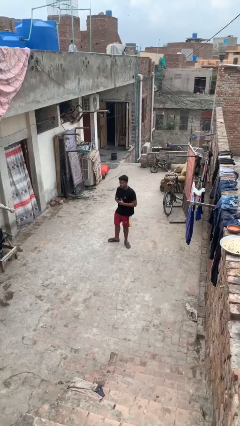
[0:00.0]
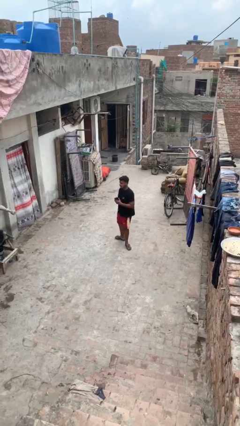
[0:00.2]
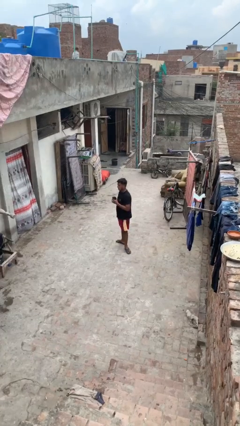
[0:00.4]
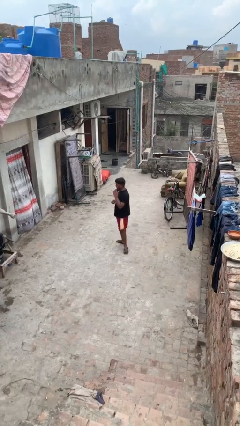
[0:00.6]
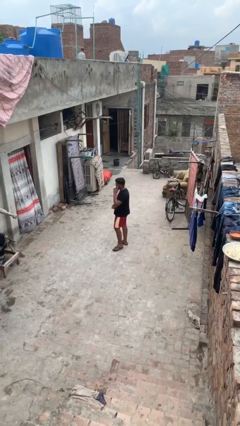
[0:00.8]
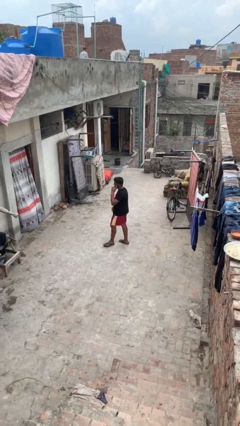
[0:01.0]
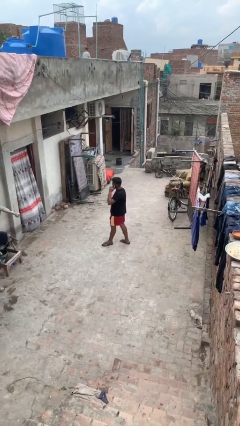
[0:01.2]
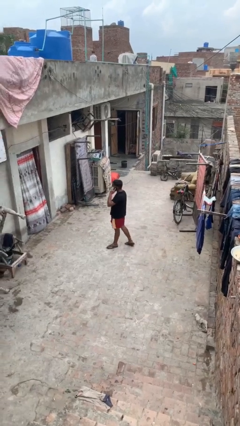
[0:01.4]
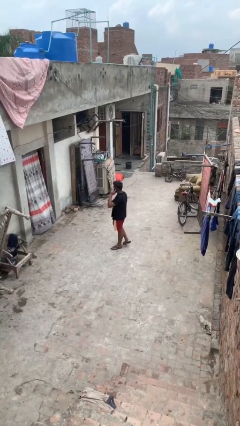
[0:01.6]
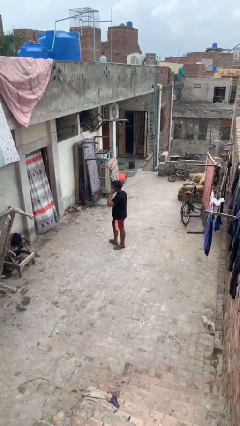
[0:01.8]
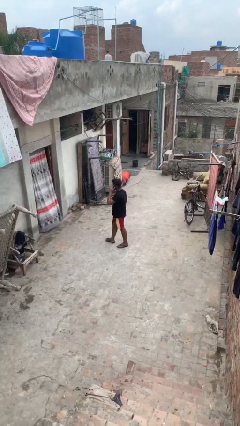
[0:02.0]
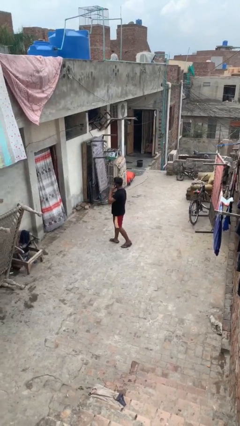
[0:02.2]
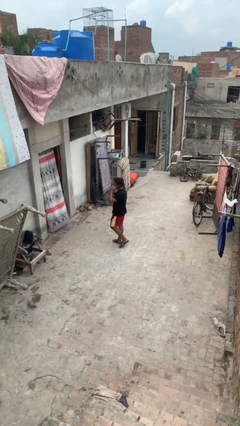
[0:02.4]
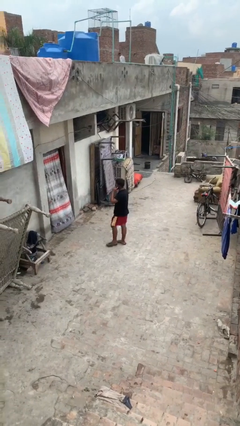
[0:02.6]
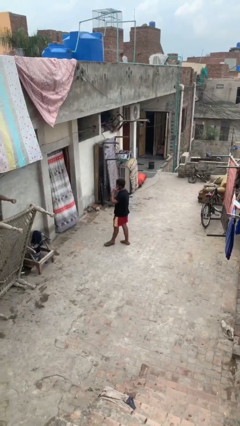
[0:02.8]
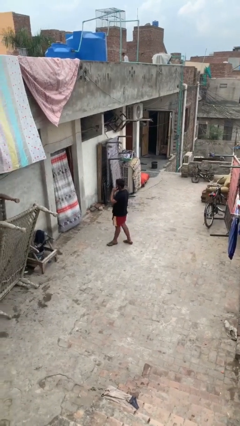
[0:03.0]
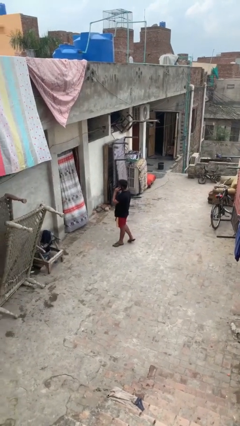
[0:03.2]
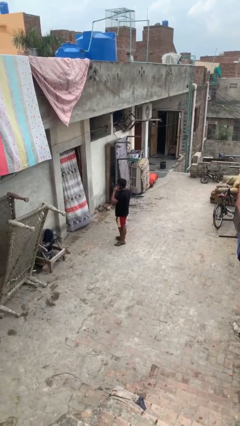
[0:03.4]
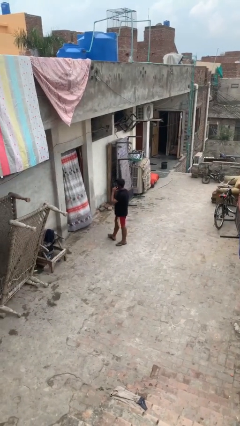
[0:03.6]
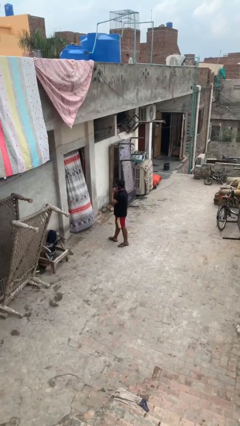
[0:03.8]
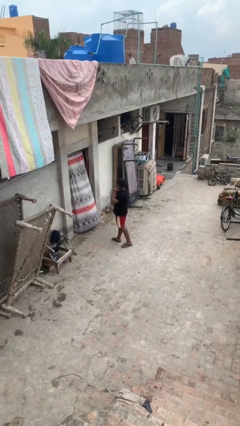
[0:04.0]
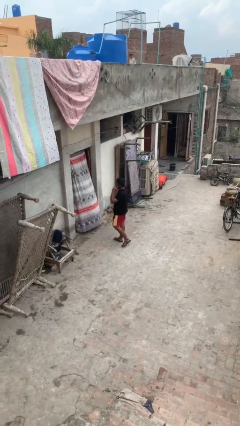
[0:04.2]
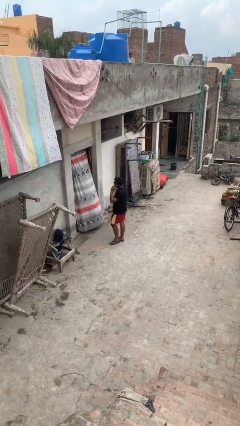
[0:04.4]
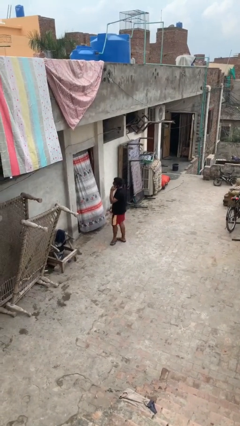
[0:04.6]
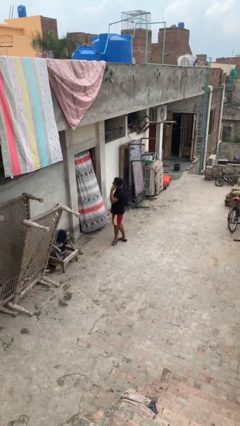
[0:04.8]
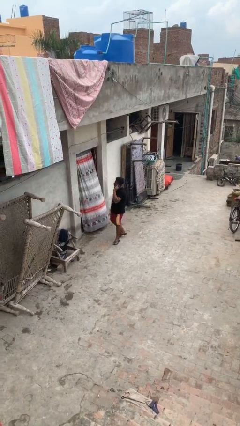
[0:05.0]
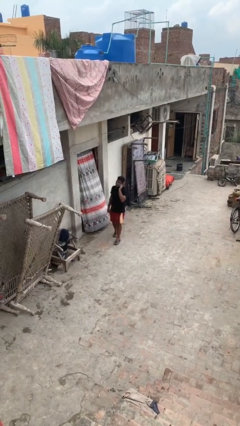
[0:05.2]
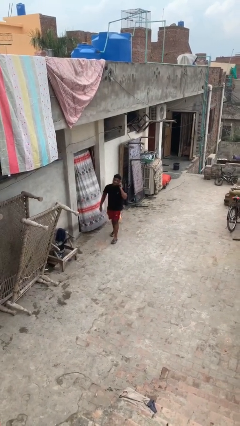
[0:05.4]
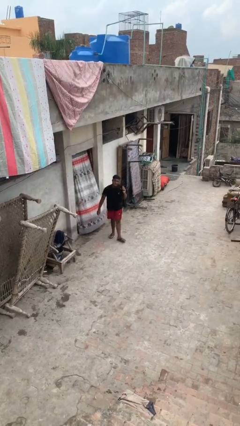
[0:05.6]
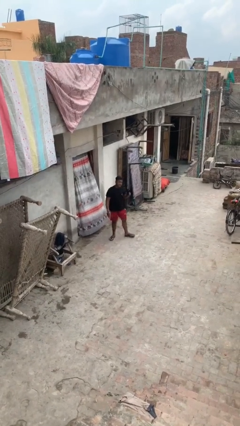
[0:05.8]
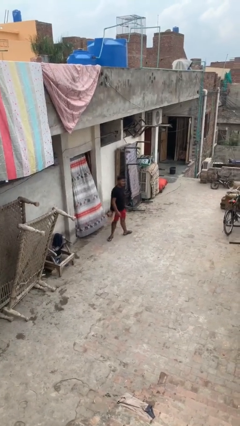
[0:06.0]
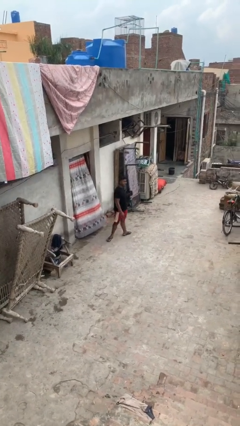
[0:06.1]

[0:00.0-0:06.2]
person talks on phone

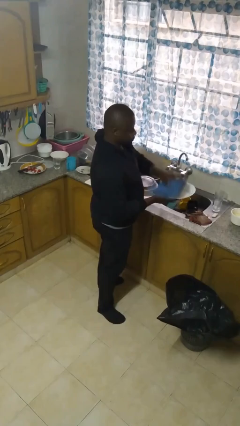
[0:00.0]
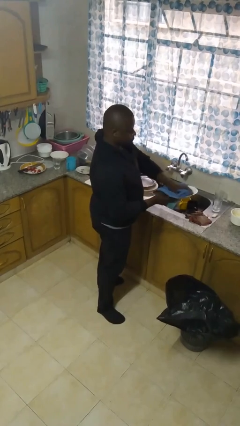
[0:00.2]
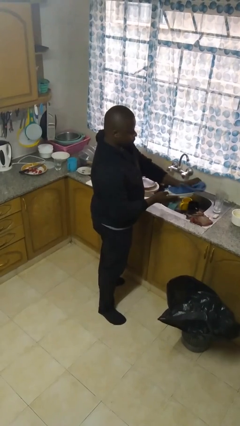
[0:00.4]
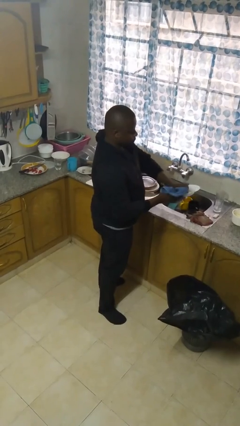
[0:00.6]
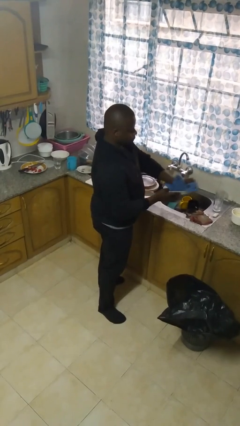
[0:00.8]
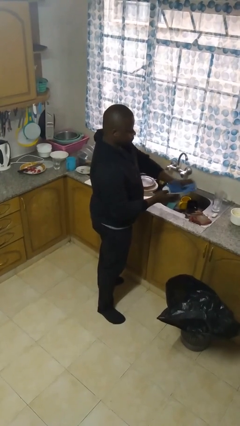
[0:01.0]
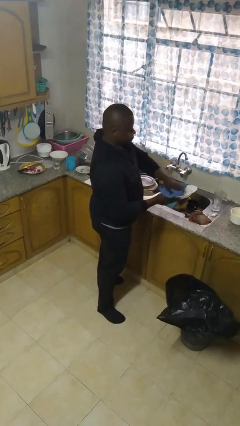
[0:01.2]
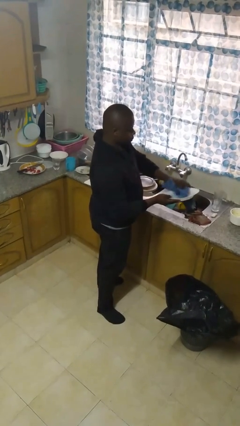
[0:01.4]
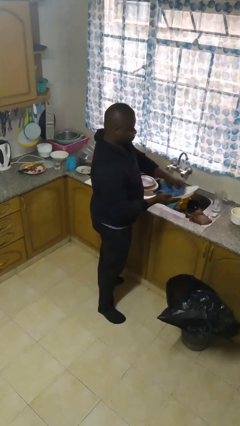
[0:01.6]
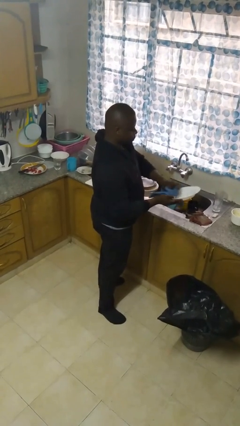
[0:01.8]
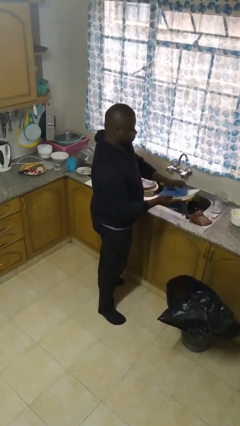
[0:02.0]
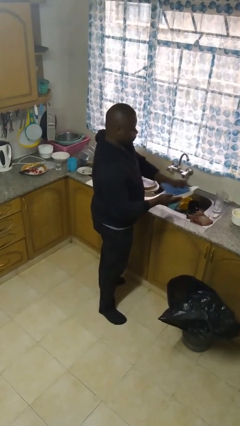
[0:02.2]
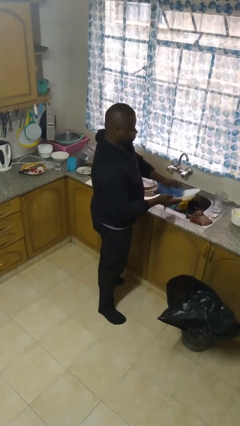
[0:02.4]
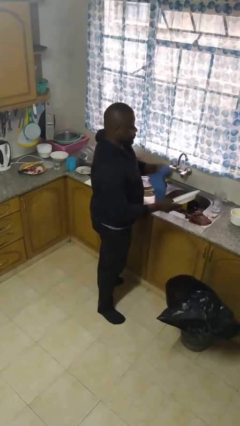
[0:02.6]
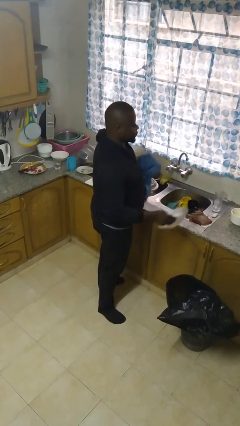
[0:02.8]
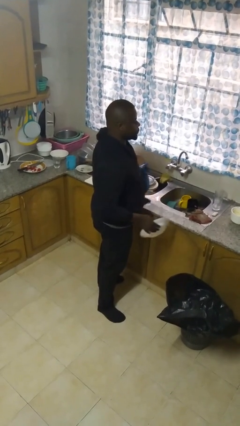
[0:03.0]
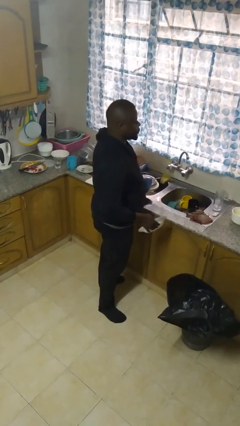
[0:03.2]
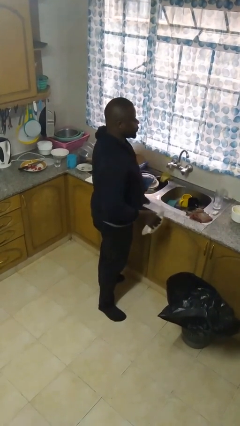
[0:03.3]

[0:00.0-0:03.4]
person dries dish

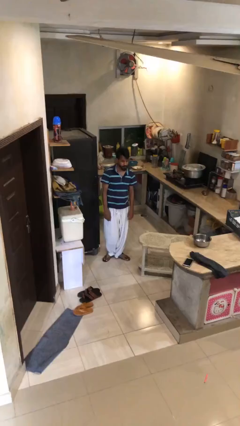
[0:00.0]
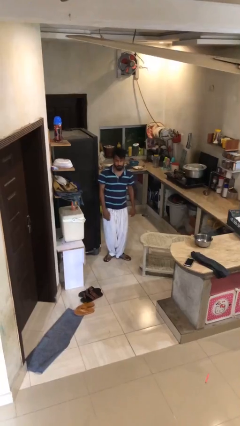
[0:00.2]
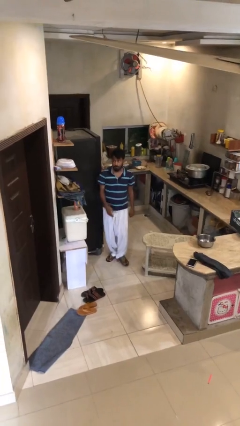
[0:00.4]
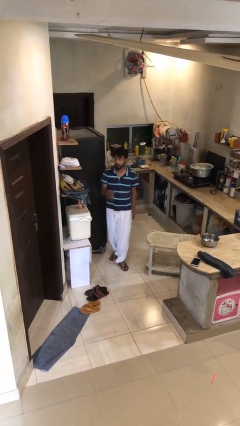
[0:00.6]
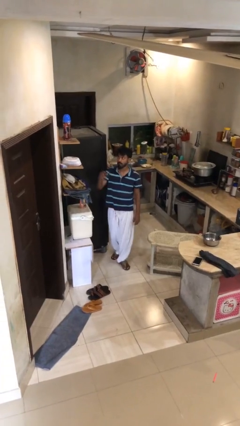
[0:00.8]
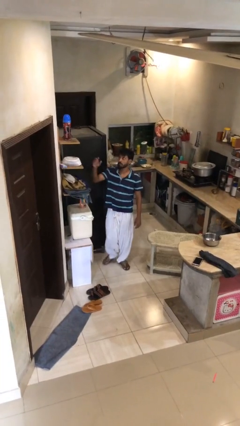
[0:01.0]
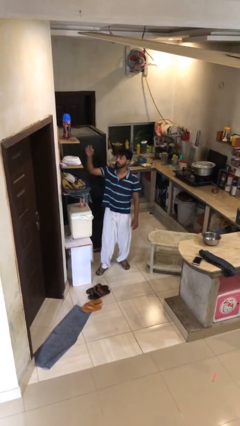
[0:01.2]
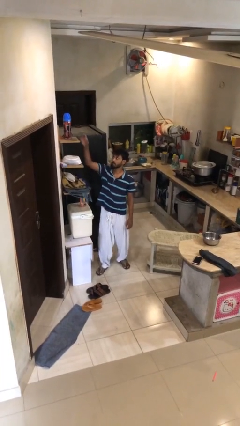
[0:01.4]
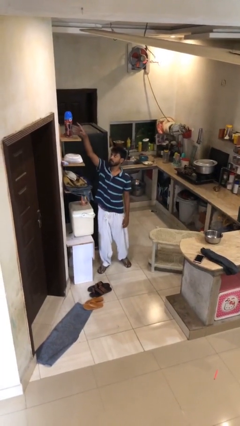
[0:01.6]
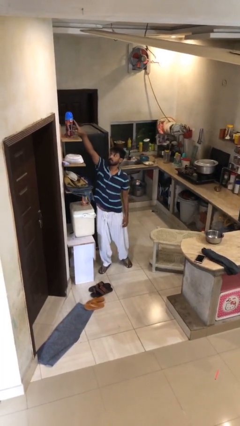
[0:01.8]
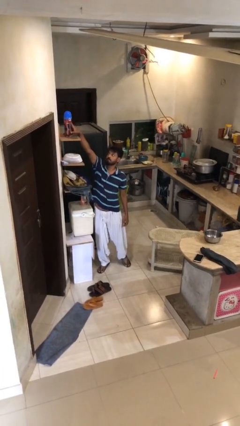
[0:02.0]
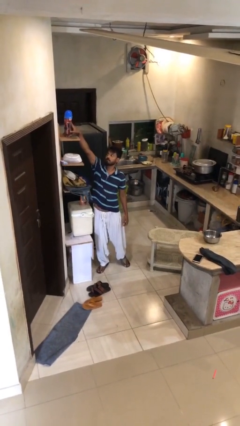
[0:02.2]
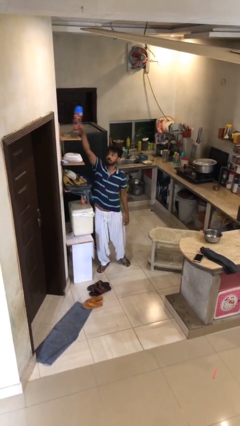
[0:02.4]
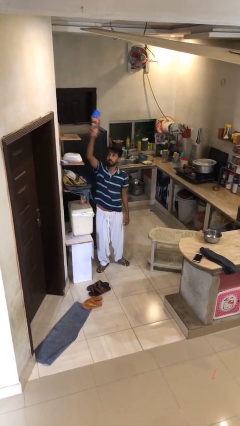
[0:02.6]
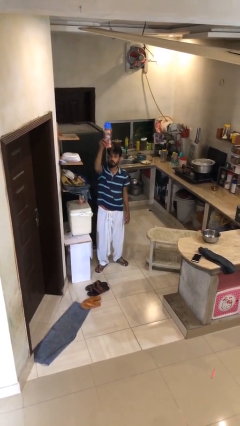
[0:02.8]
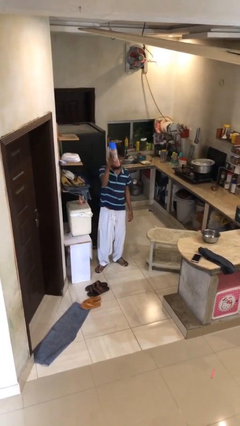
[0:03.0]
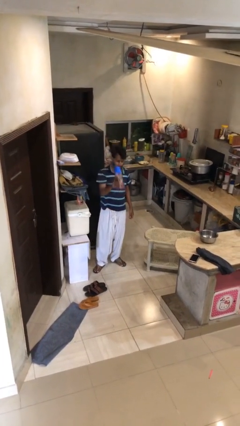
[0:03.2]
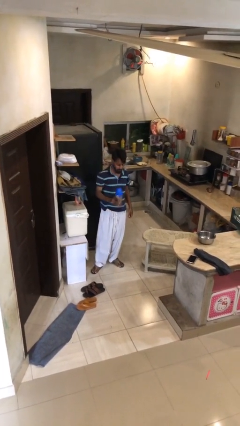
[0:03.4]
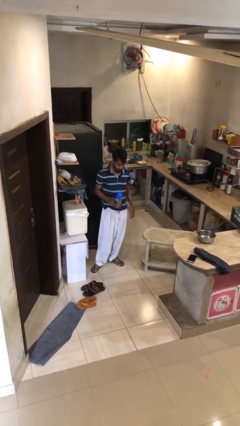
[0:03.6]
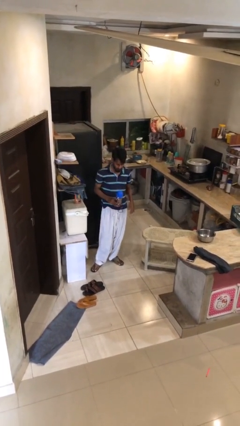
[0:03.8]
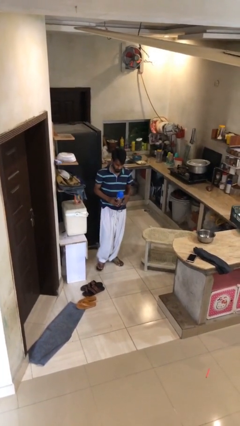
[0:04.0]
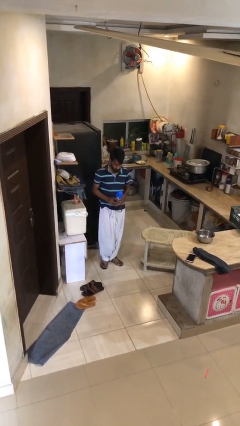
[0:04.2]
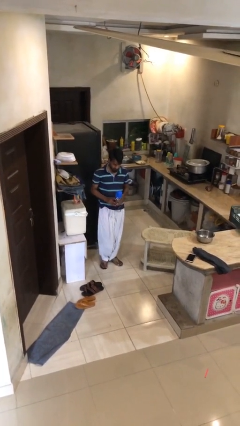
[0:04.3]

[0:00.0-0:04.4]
person picks up object from shelf

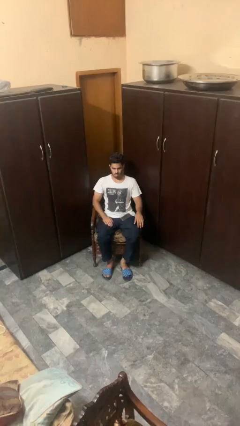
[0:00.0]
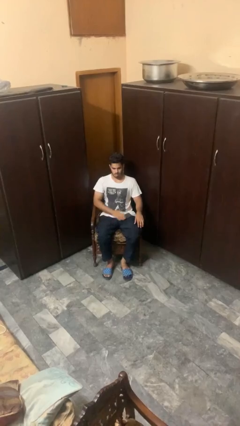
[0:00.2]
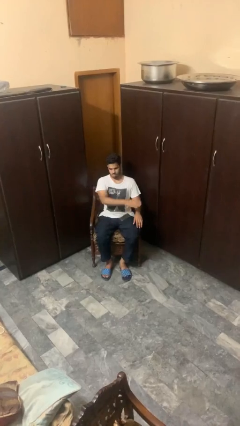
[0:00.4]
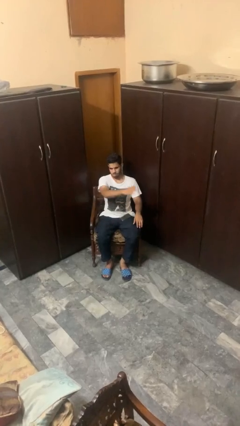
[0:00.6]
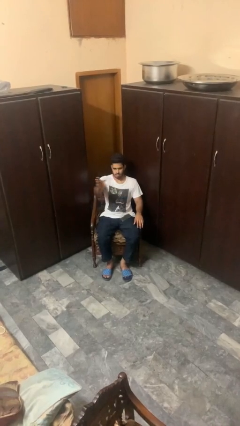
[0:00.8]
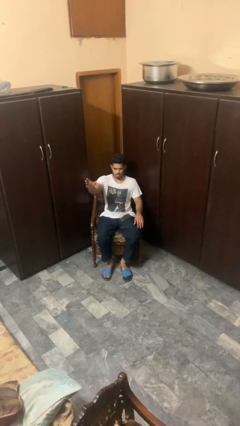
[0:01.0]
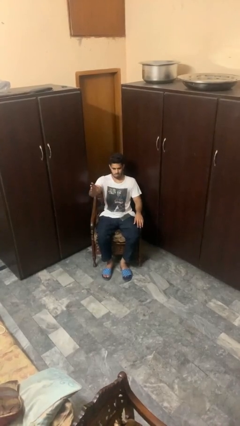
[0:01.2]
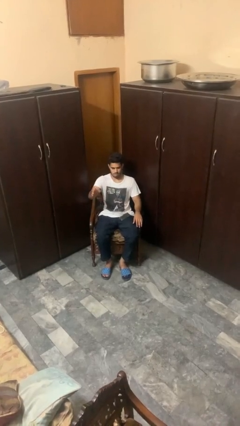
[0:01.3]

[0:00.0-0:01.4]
person gestures swipe right

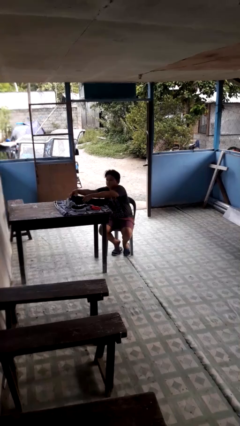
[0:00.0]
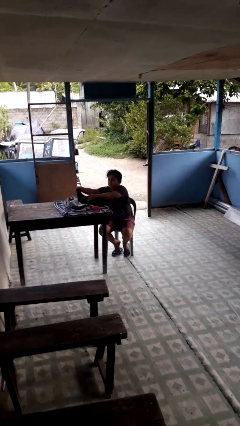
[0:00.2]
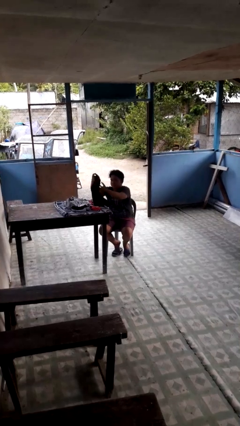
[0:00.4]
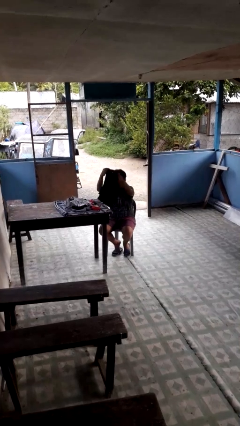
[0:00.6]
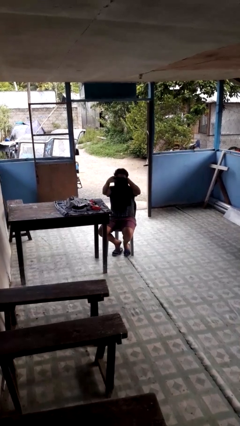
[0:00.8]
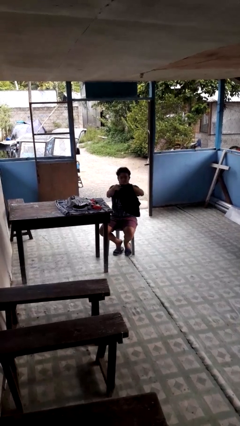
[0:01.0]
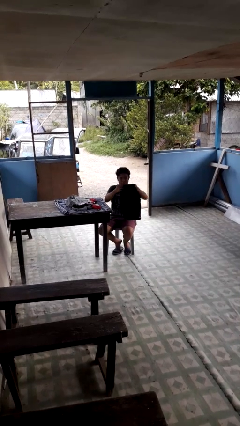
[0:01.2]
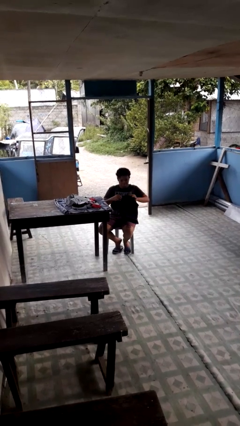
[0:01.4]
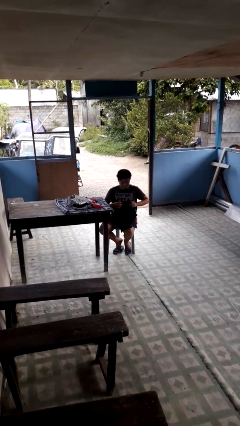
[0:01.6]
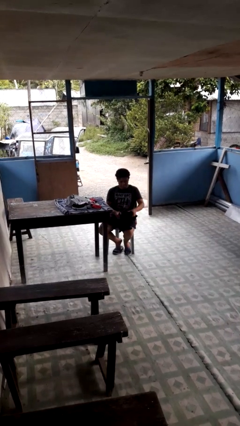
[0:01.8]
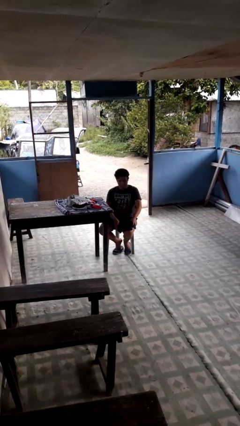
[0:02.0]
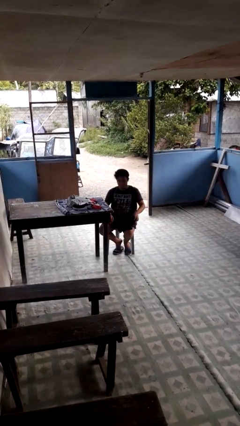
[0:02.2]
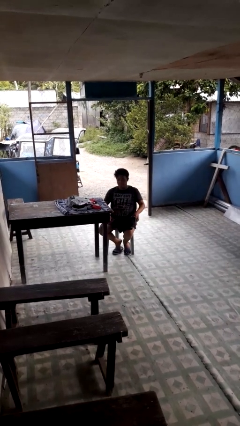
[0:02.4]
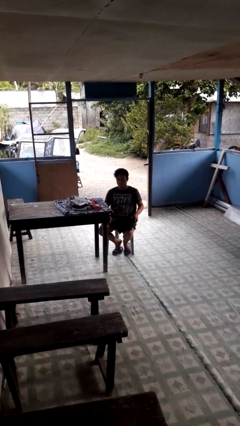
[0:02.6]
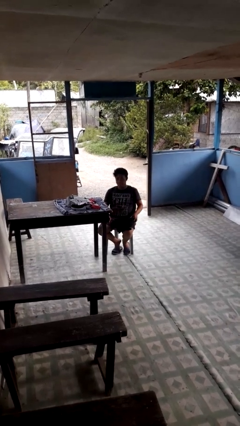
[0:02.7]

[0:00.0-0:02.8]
person folds pants
